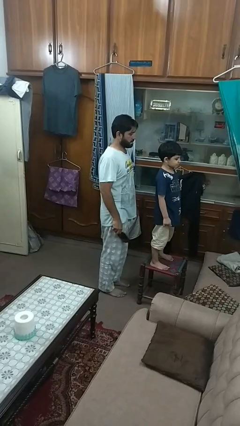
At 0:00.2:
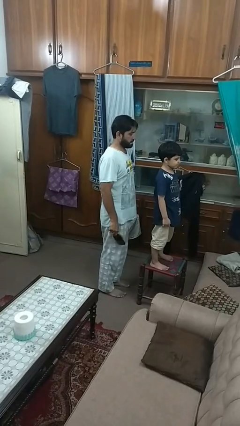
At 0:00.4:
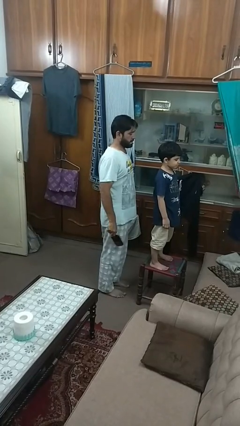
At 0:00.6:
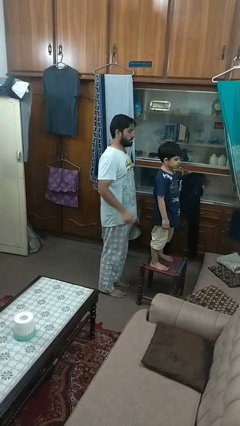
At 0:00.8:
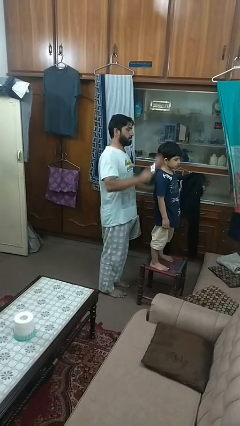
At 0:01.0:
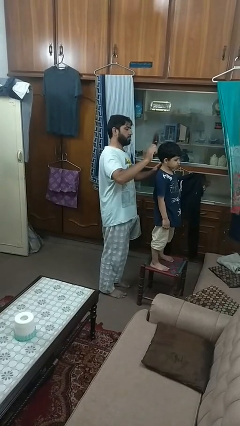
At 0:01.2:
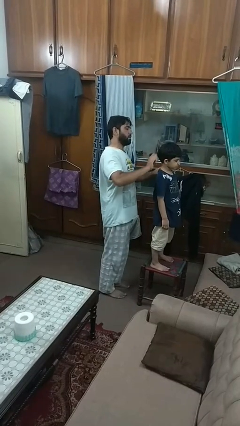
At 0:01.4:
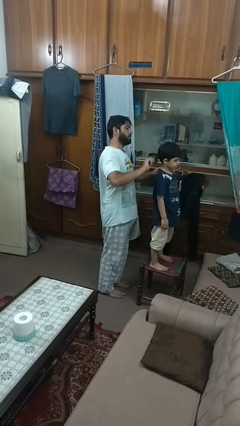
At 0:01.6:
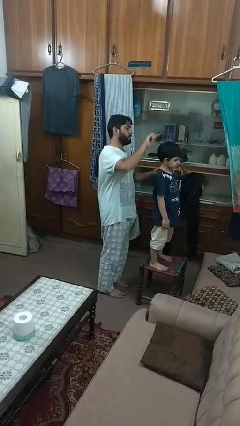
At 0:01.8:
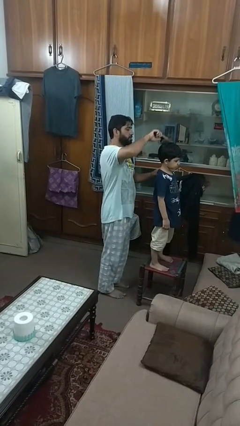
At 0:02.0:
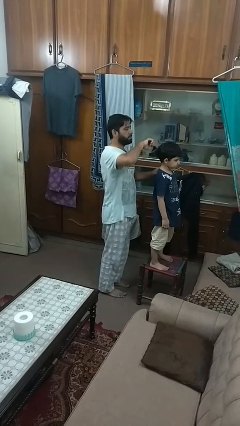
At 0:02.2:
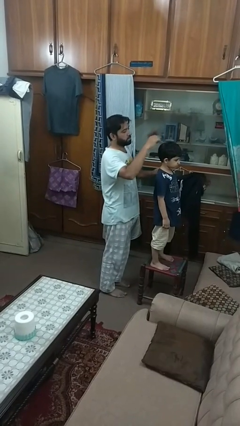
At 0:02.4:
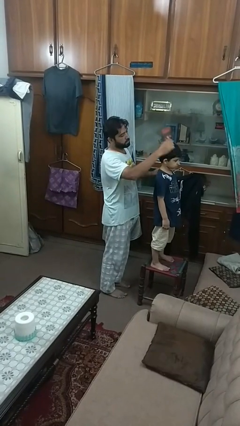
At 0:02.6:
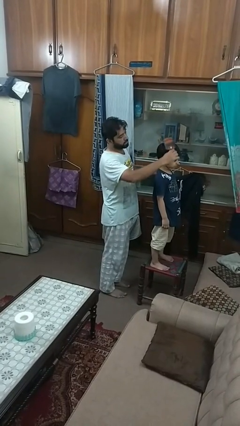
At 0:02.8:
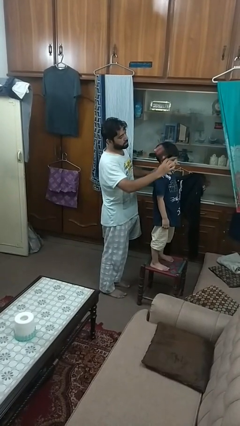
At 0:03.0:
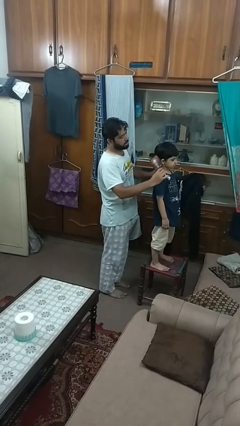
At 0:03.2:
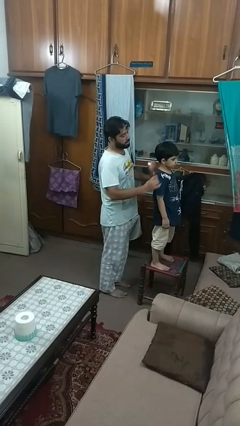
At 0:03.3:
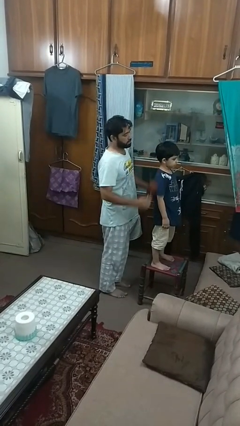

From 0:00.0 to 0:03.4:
person brushes hair of person

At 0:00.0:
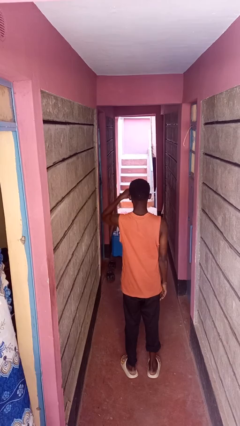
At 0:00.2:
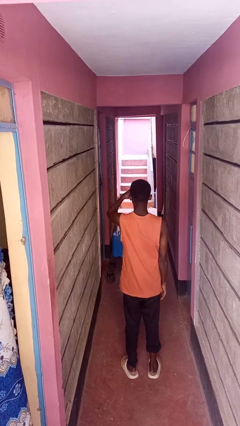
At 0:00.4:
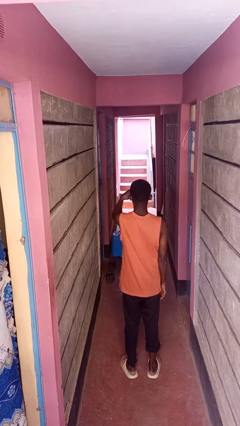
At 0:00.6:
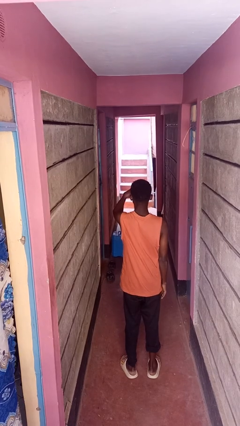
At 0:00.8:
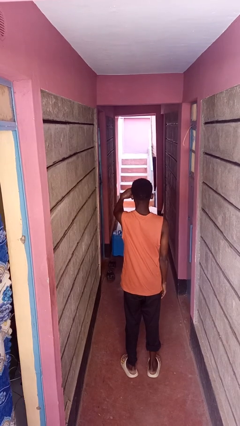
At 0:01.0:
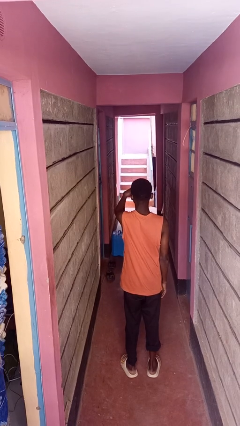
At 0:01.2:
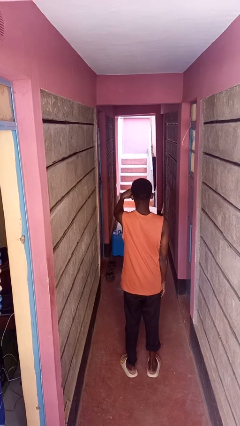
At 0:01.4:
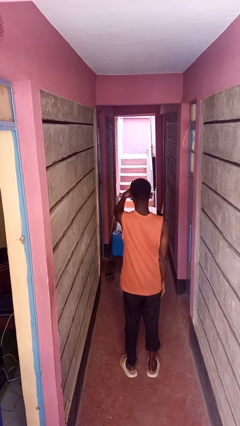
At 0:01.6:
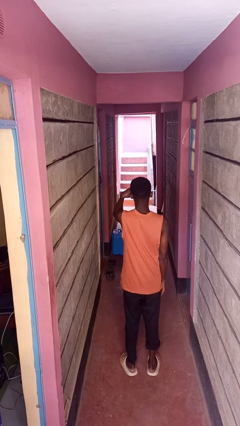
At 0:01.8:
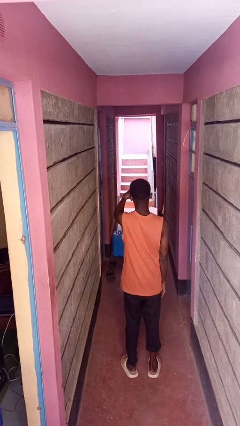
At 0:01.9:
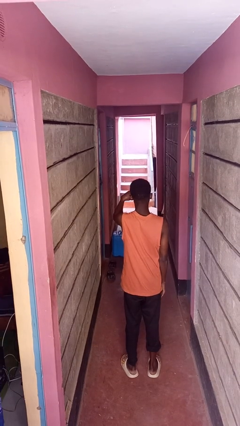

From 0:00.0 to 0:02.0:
person rubs eyes

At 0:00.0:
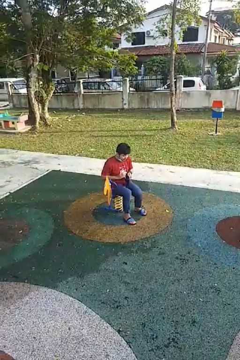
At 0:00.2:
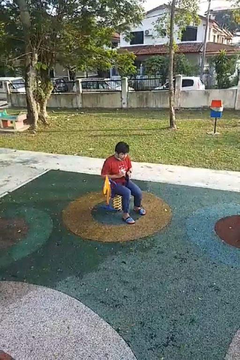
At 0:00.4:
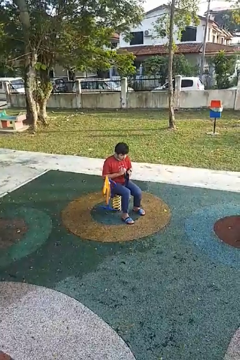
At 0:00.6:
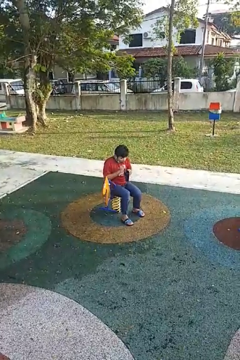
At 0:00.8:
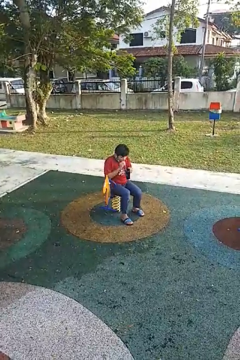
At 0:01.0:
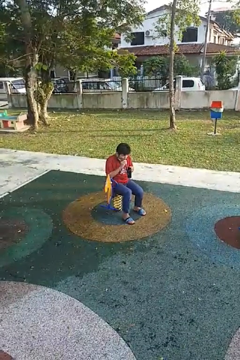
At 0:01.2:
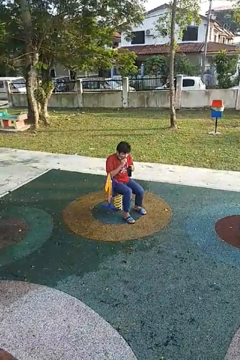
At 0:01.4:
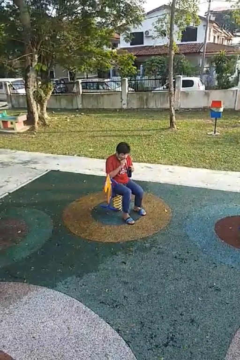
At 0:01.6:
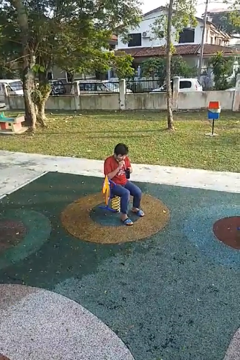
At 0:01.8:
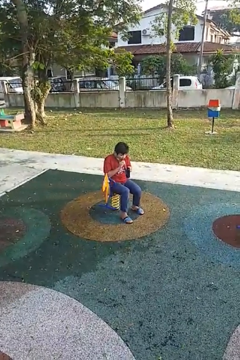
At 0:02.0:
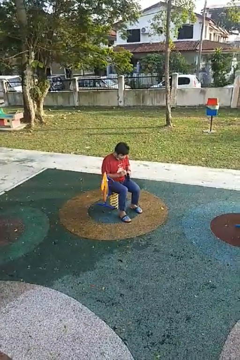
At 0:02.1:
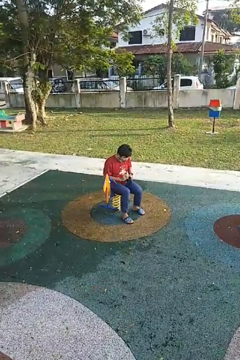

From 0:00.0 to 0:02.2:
person drinks from straw

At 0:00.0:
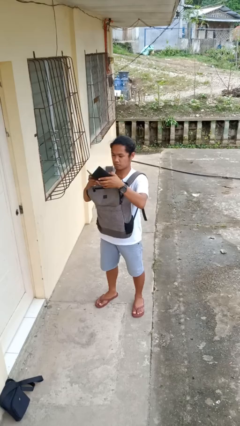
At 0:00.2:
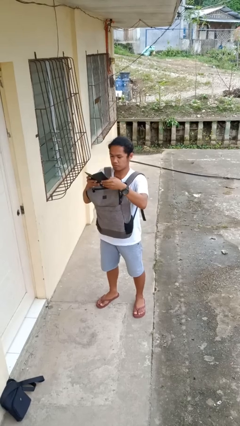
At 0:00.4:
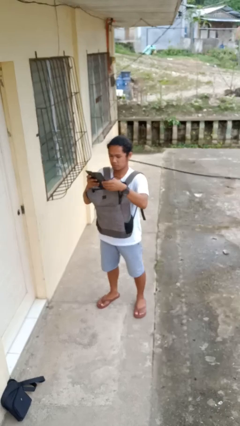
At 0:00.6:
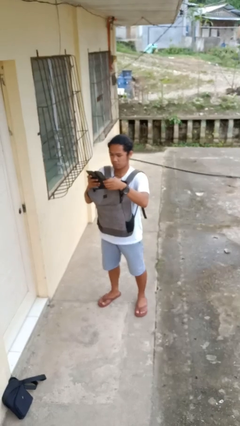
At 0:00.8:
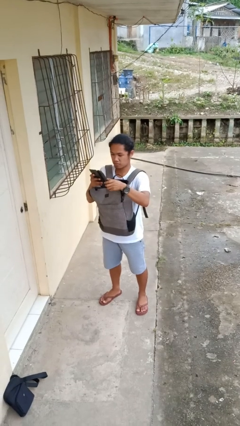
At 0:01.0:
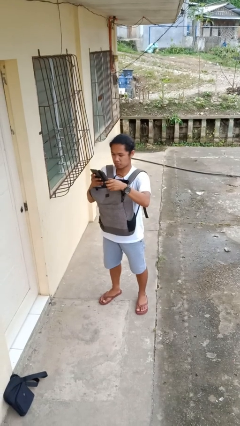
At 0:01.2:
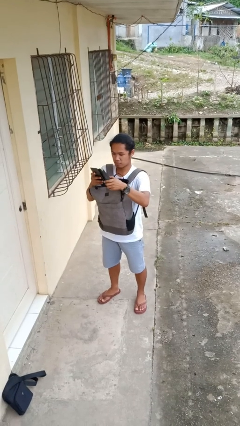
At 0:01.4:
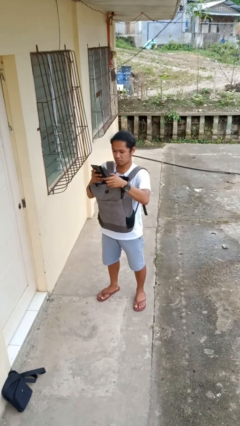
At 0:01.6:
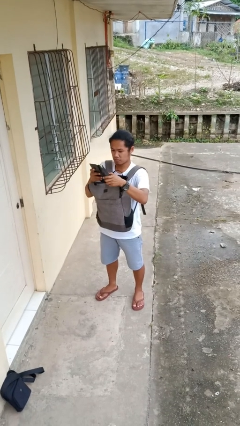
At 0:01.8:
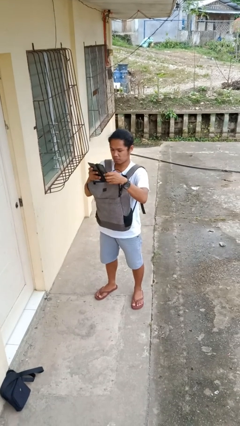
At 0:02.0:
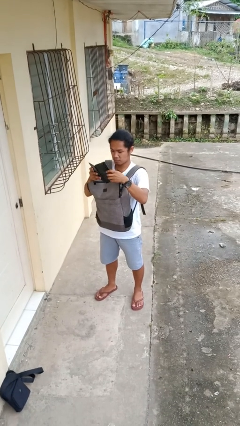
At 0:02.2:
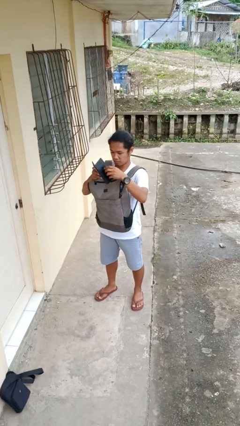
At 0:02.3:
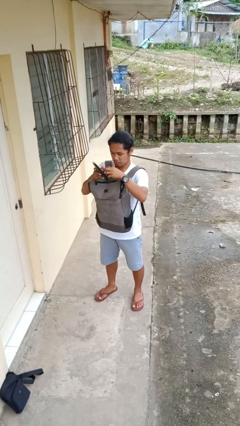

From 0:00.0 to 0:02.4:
person takes object from backpack

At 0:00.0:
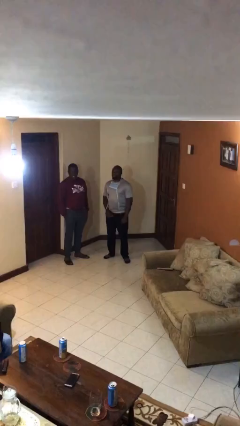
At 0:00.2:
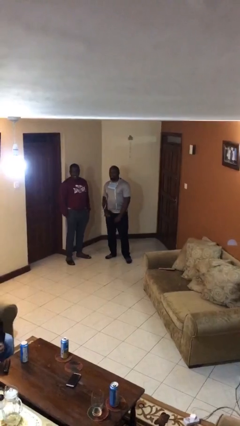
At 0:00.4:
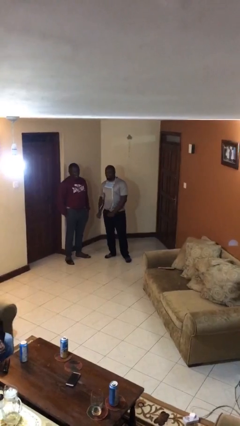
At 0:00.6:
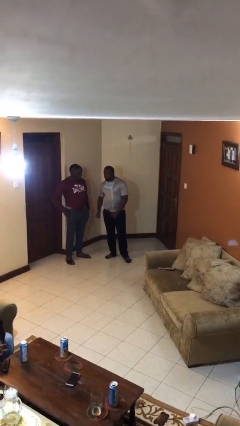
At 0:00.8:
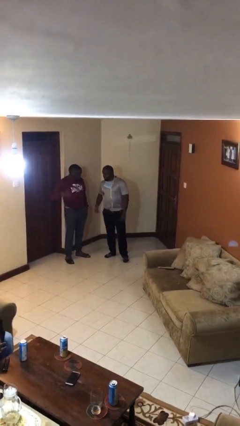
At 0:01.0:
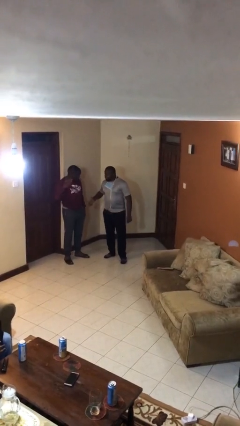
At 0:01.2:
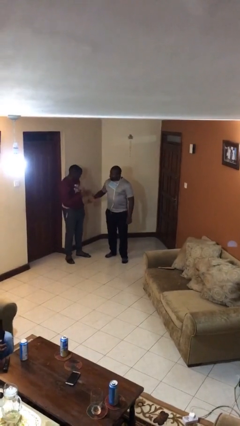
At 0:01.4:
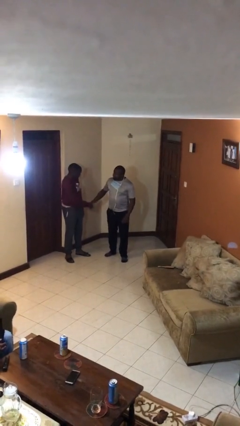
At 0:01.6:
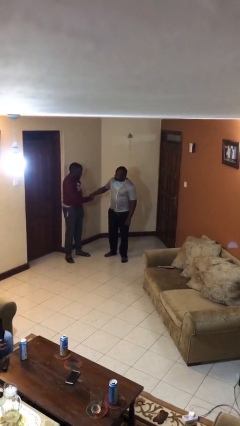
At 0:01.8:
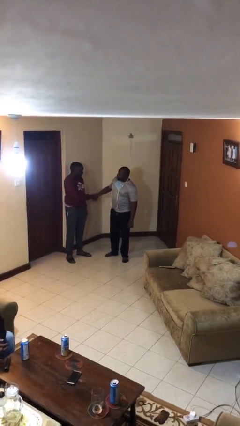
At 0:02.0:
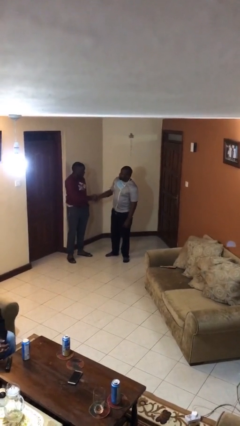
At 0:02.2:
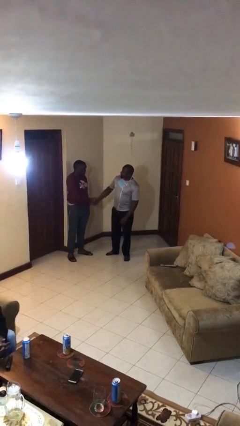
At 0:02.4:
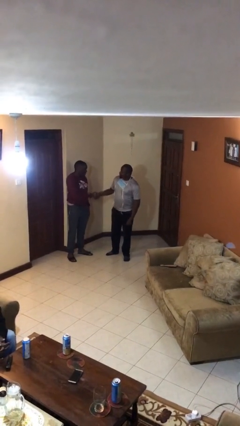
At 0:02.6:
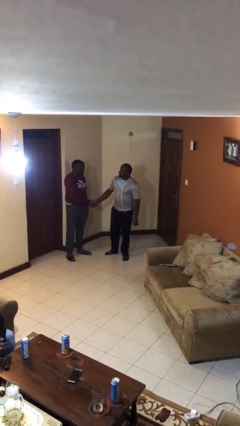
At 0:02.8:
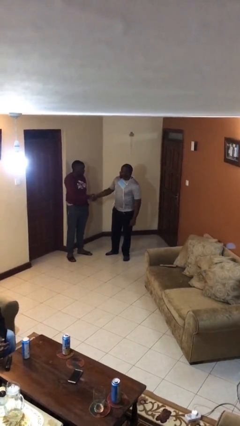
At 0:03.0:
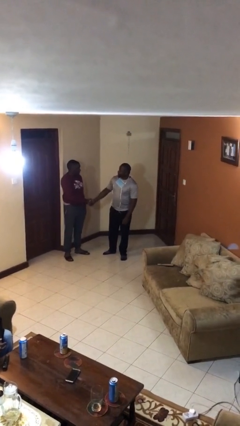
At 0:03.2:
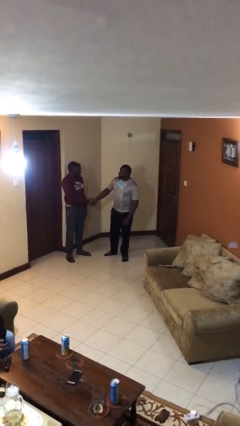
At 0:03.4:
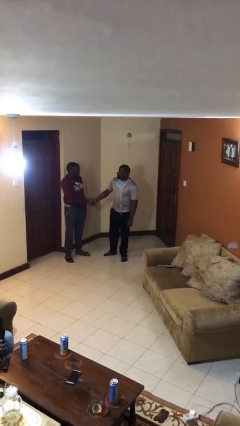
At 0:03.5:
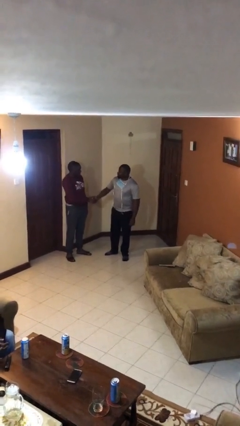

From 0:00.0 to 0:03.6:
person shakes hand

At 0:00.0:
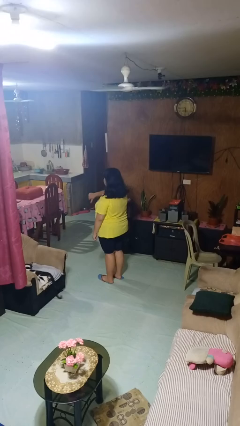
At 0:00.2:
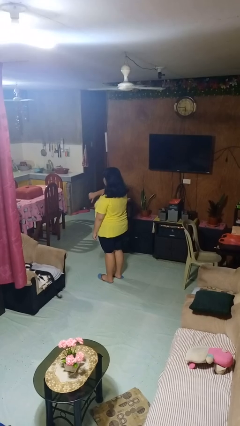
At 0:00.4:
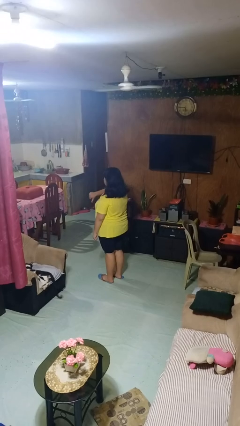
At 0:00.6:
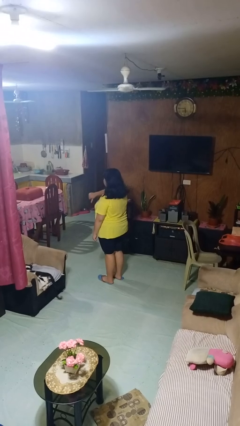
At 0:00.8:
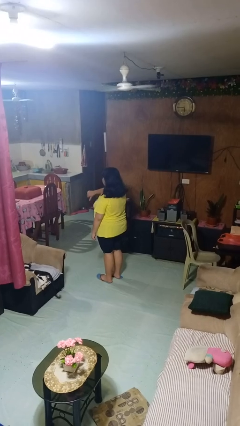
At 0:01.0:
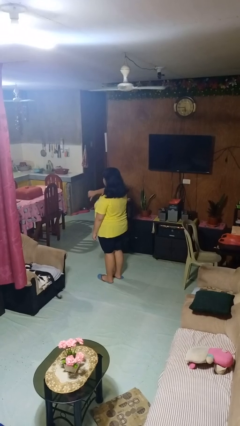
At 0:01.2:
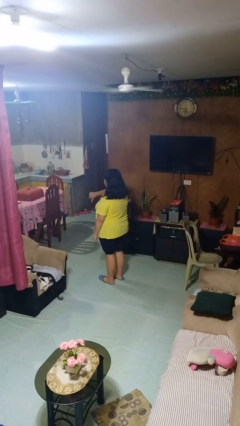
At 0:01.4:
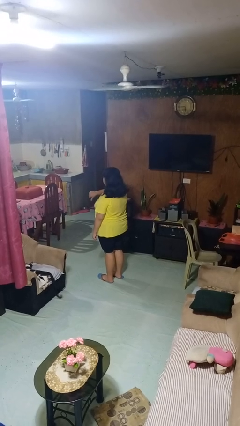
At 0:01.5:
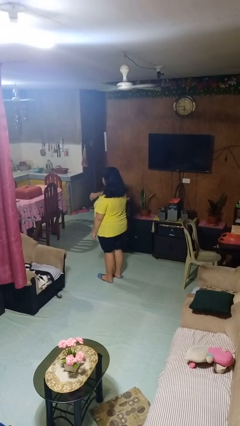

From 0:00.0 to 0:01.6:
person gestures thumbs down

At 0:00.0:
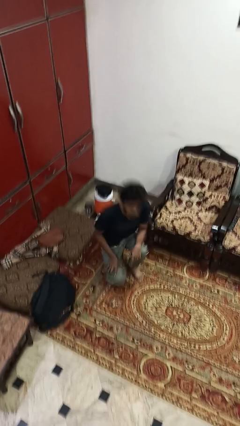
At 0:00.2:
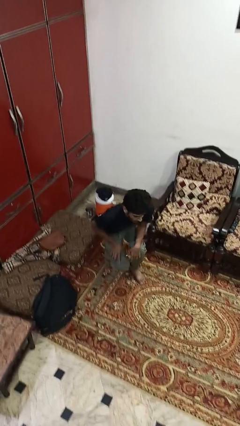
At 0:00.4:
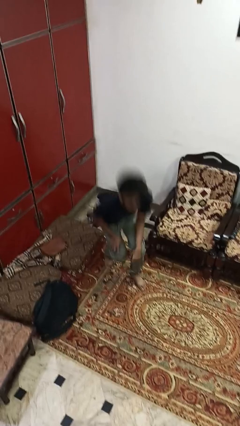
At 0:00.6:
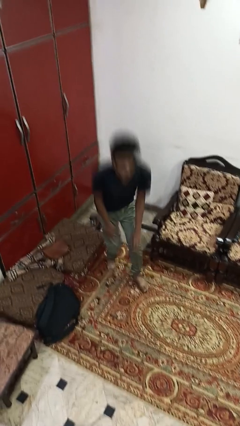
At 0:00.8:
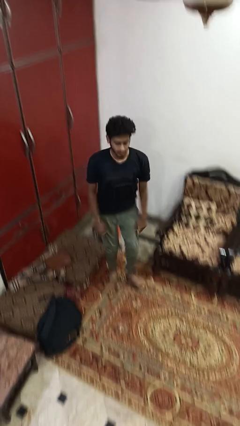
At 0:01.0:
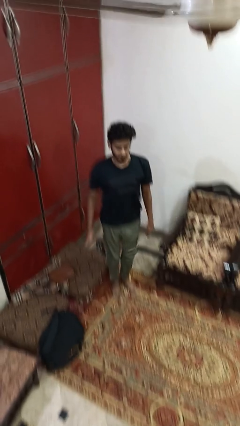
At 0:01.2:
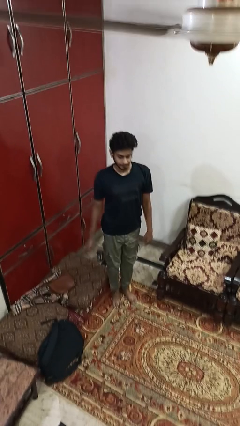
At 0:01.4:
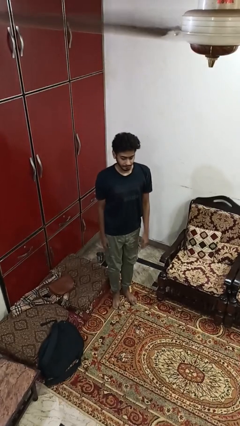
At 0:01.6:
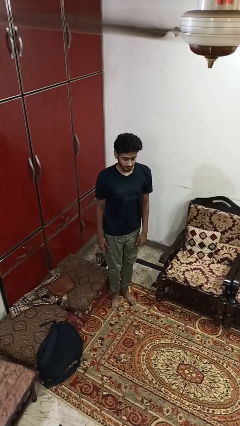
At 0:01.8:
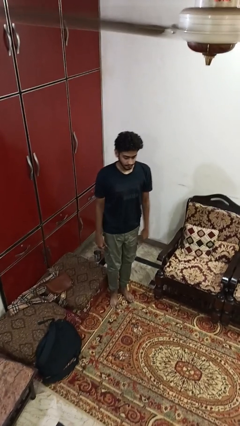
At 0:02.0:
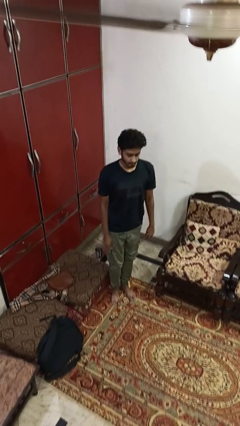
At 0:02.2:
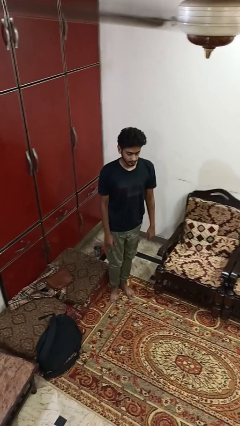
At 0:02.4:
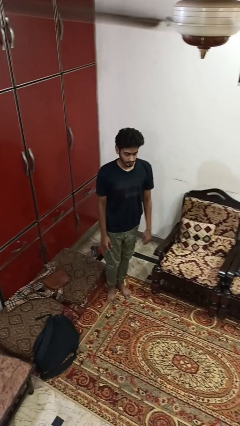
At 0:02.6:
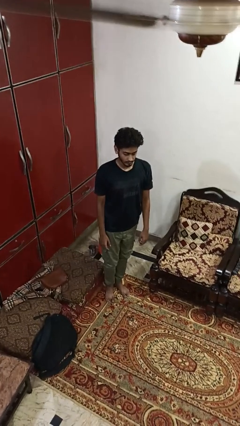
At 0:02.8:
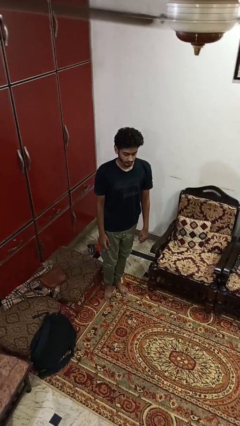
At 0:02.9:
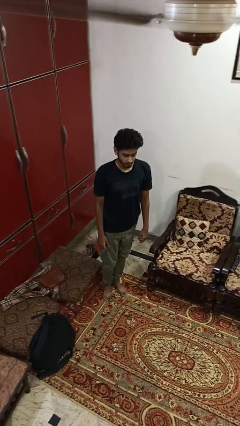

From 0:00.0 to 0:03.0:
person stands up from floor
